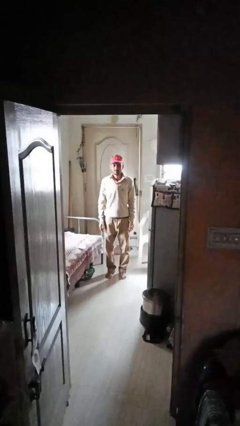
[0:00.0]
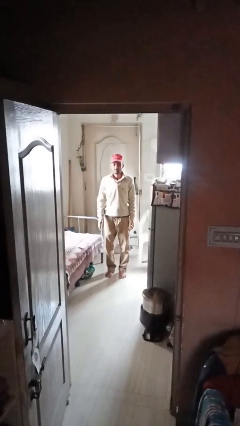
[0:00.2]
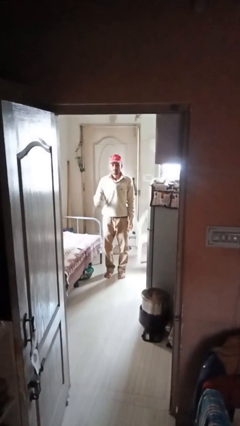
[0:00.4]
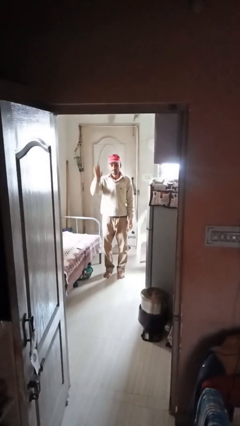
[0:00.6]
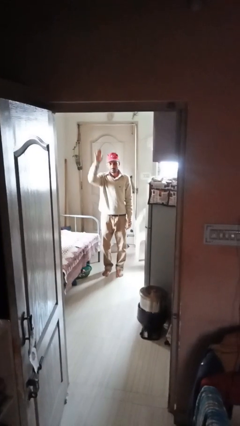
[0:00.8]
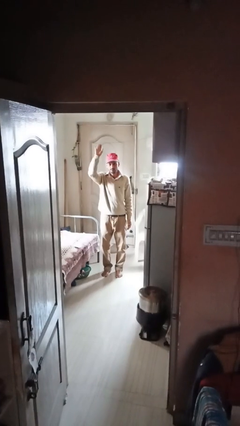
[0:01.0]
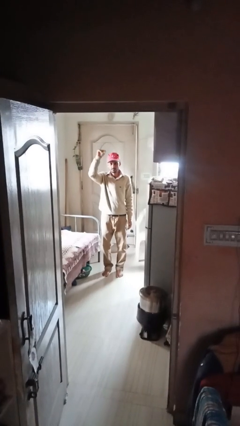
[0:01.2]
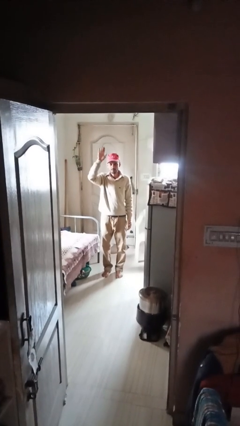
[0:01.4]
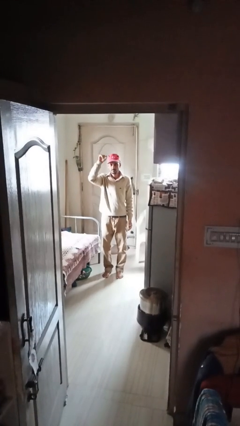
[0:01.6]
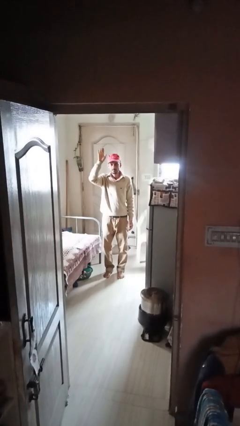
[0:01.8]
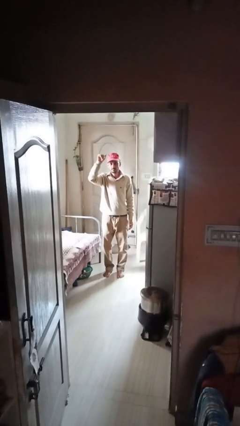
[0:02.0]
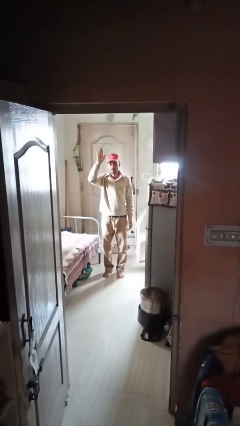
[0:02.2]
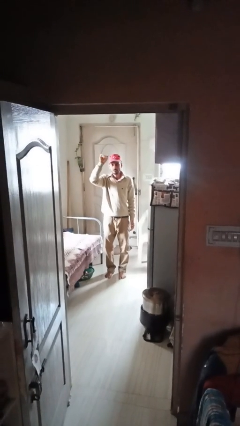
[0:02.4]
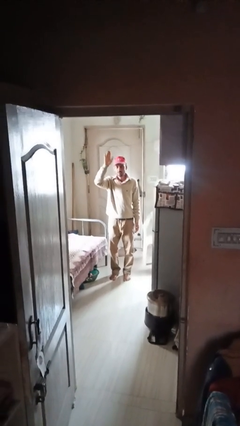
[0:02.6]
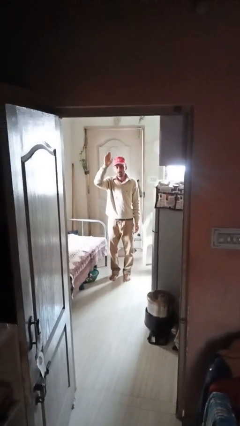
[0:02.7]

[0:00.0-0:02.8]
person gestures come here

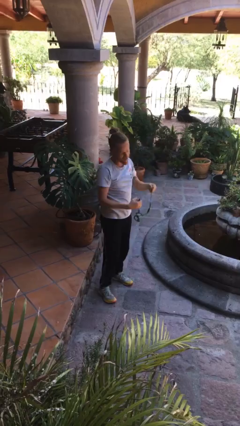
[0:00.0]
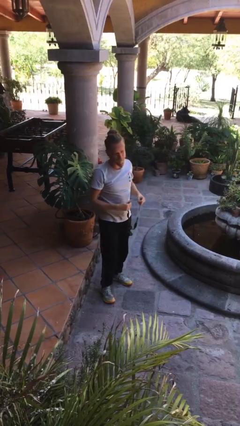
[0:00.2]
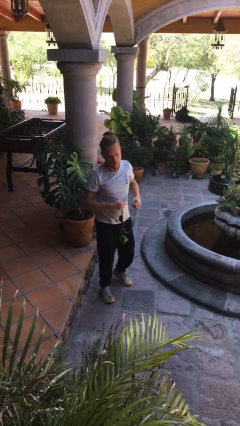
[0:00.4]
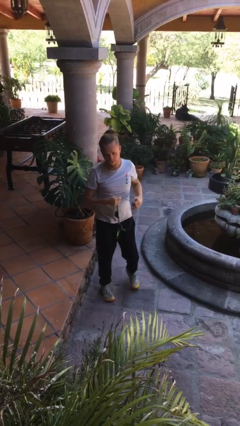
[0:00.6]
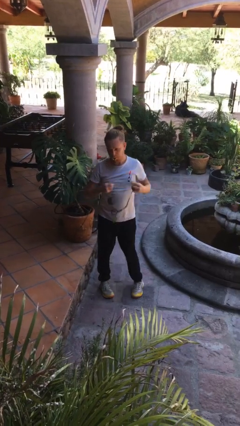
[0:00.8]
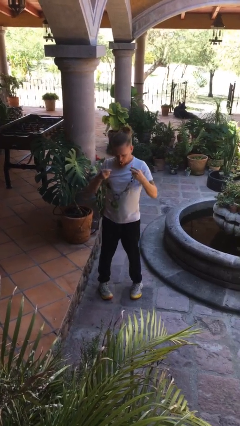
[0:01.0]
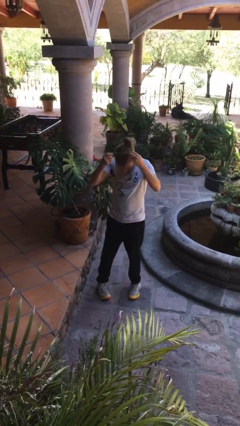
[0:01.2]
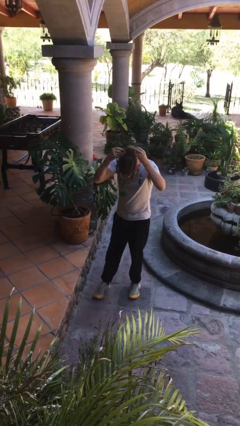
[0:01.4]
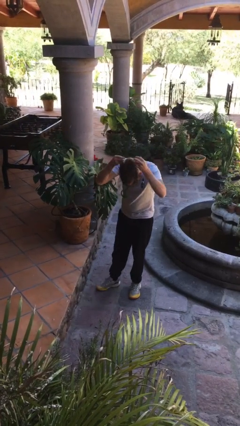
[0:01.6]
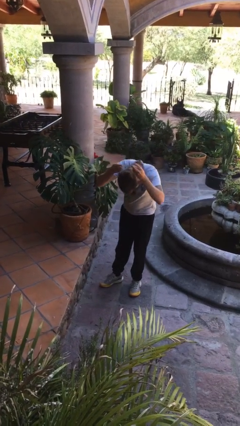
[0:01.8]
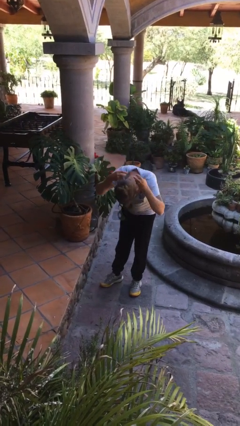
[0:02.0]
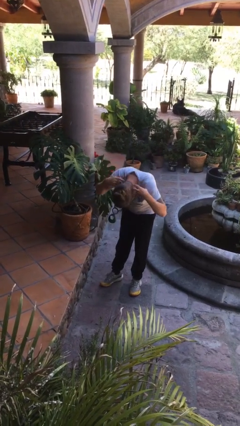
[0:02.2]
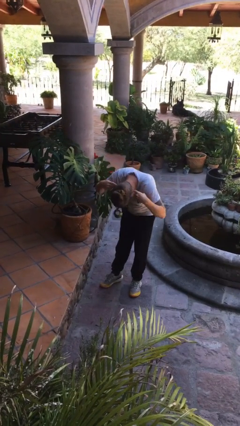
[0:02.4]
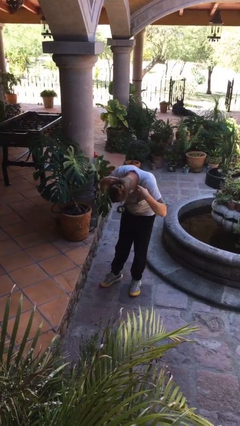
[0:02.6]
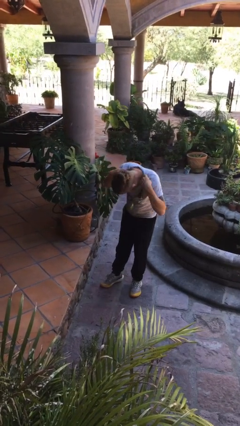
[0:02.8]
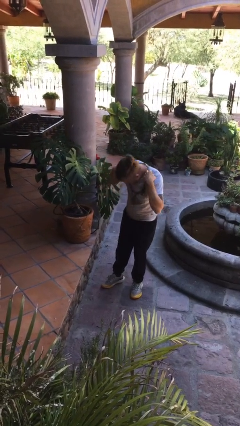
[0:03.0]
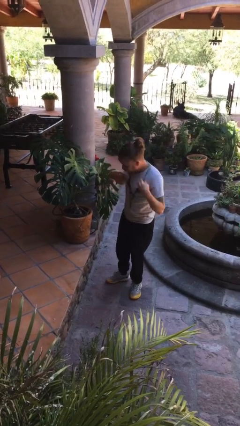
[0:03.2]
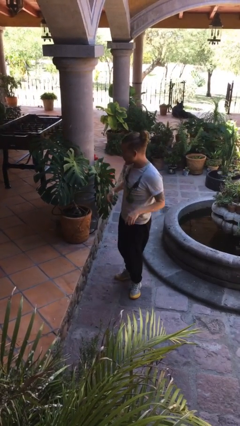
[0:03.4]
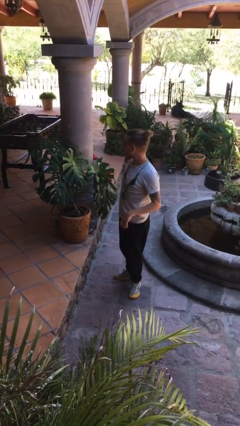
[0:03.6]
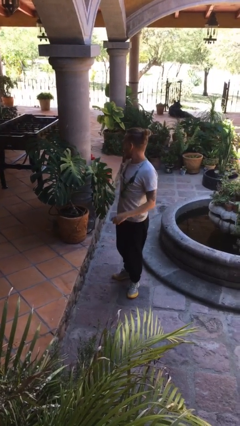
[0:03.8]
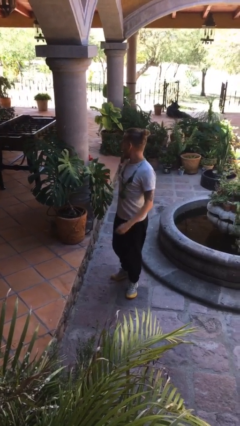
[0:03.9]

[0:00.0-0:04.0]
person puts on necklace

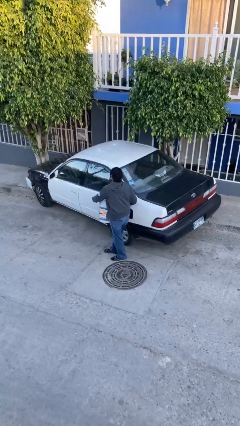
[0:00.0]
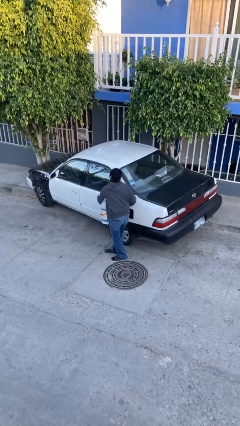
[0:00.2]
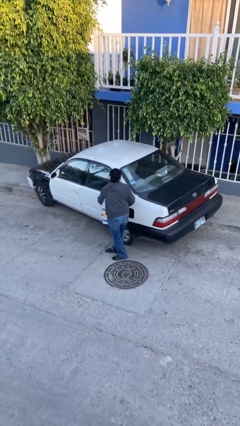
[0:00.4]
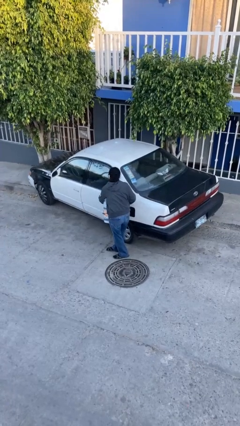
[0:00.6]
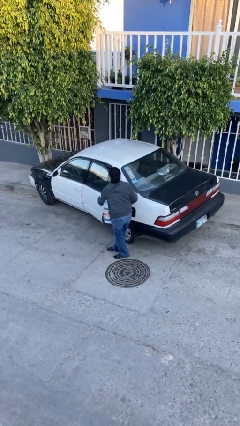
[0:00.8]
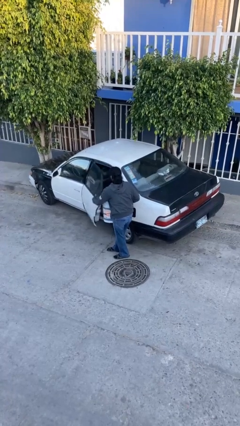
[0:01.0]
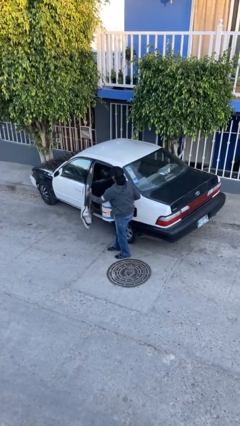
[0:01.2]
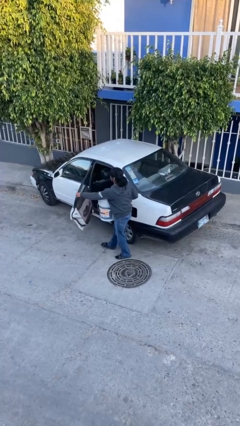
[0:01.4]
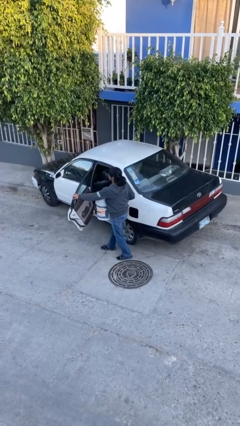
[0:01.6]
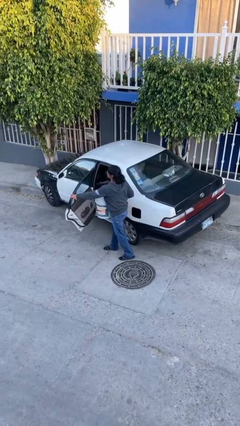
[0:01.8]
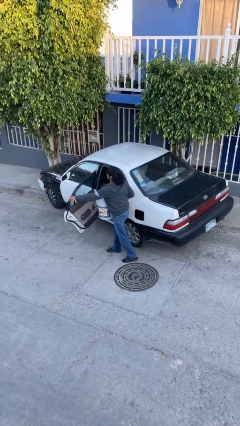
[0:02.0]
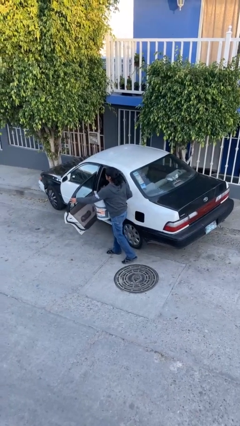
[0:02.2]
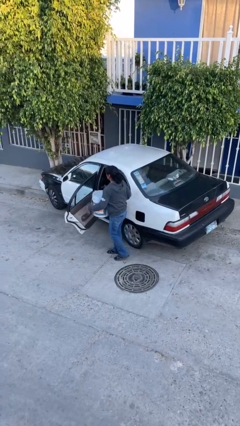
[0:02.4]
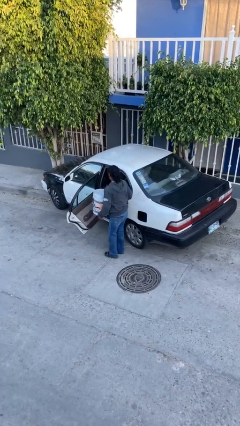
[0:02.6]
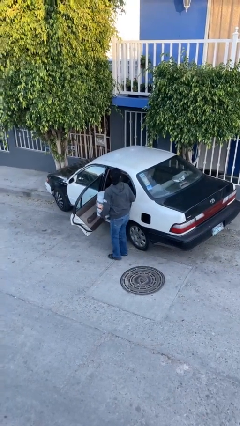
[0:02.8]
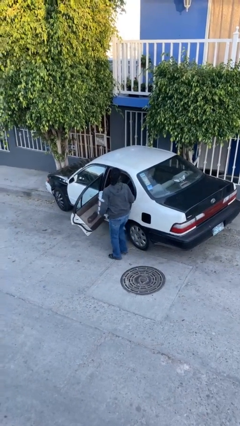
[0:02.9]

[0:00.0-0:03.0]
person opens car door

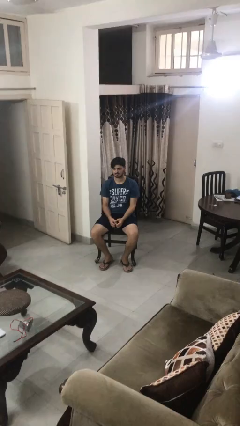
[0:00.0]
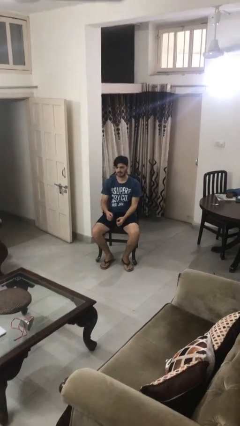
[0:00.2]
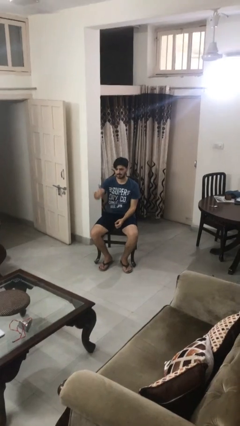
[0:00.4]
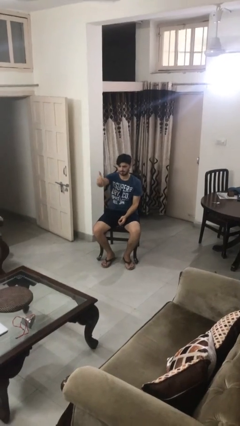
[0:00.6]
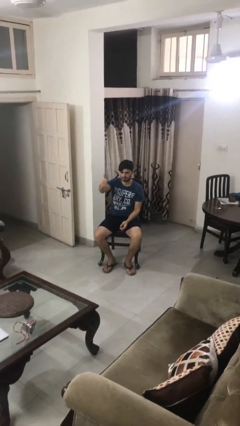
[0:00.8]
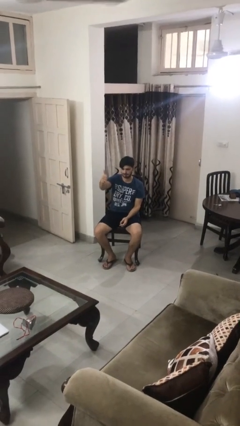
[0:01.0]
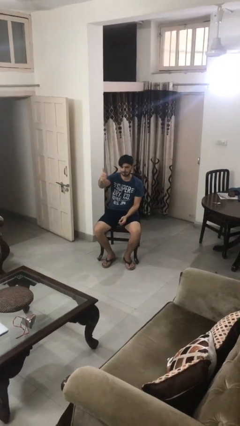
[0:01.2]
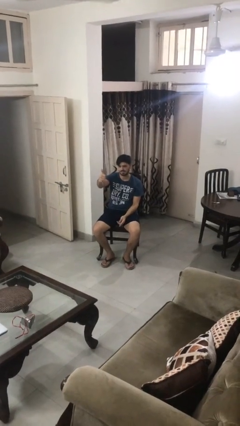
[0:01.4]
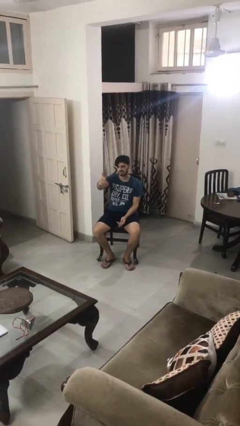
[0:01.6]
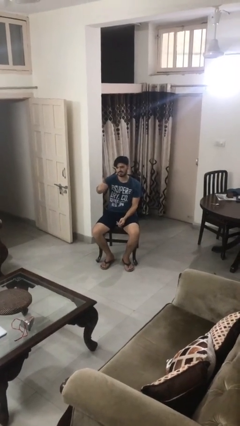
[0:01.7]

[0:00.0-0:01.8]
person gestures thumbs up

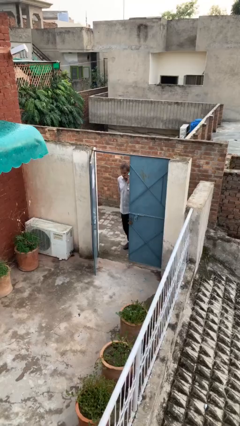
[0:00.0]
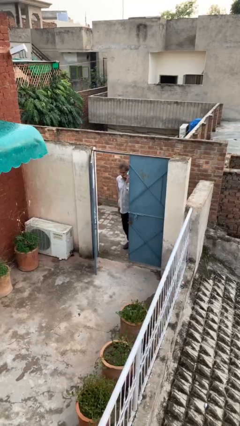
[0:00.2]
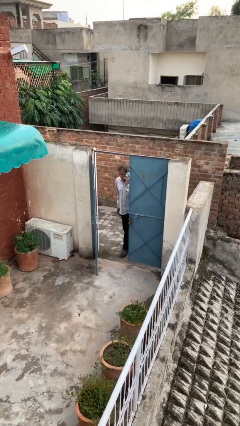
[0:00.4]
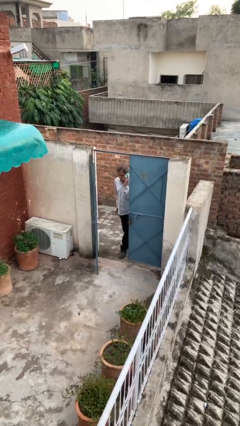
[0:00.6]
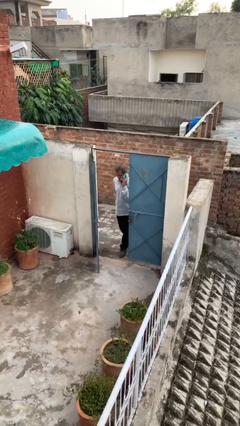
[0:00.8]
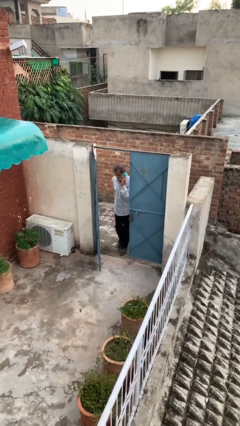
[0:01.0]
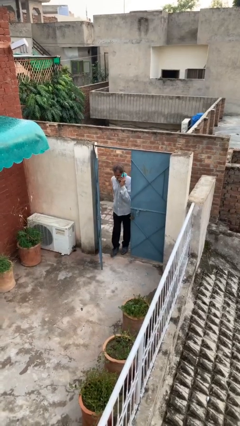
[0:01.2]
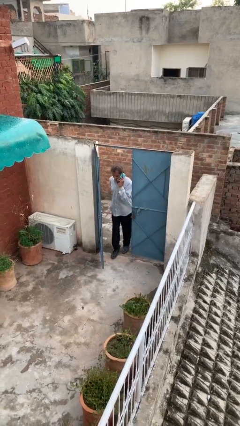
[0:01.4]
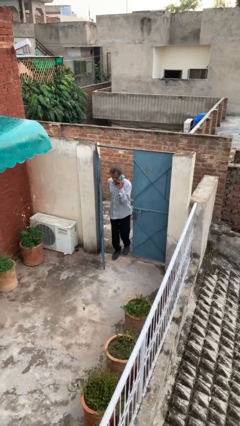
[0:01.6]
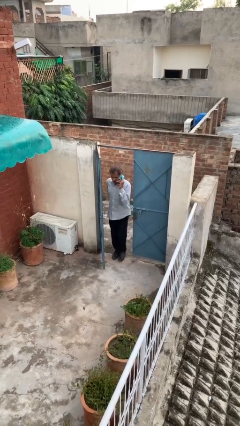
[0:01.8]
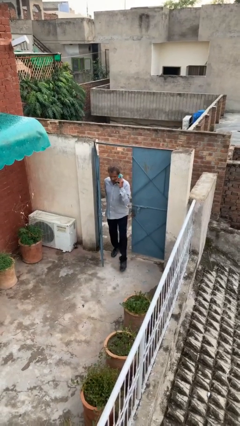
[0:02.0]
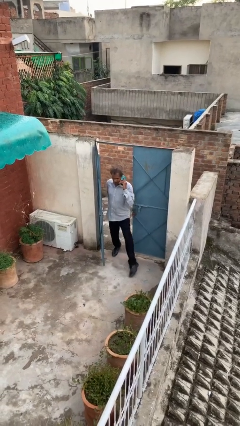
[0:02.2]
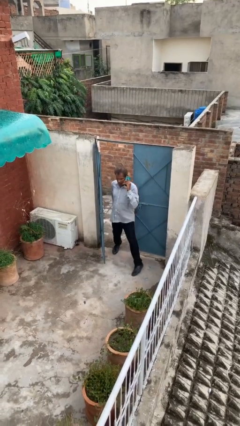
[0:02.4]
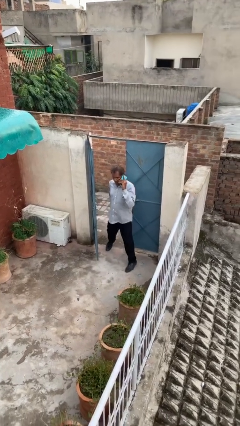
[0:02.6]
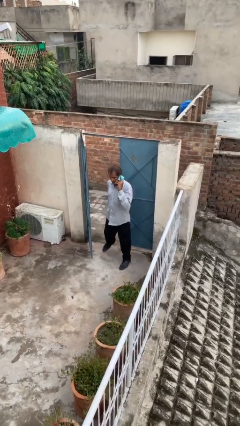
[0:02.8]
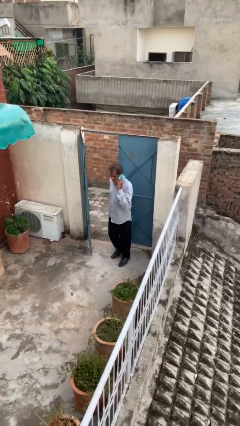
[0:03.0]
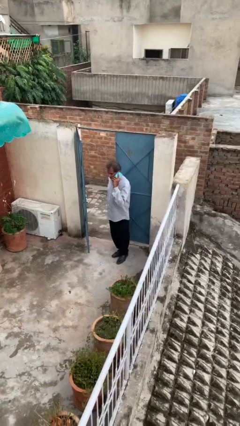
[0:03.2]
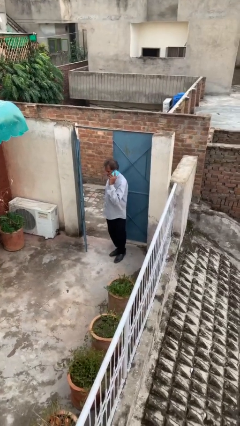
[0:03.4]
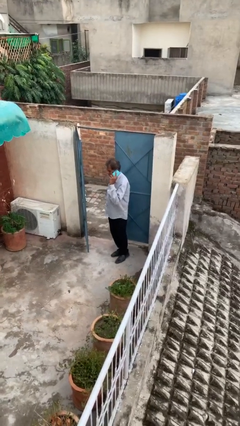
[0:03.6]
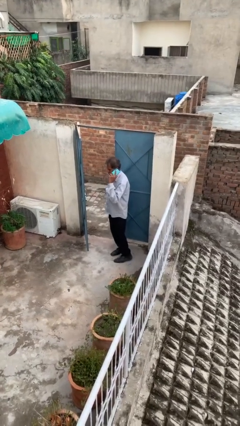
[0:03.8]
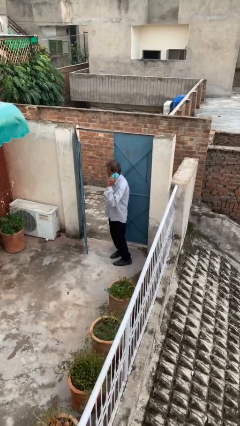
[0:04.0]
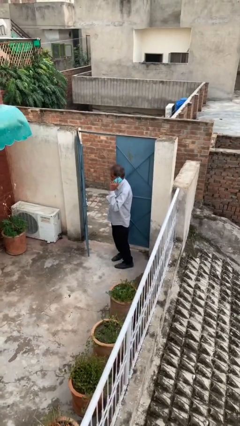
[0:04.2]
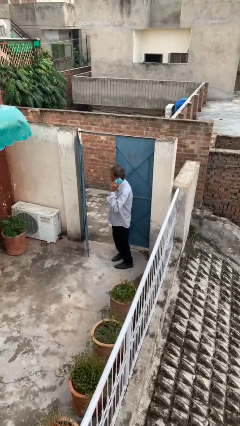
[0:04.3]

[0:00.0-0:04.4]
person enters scene through structure

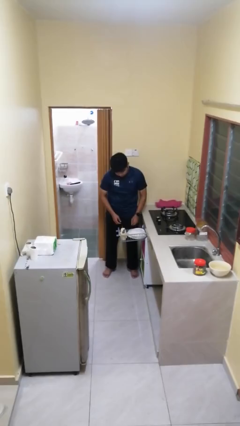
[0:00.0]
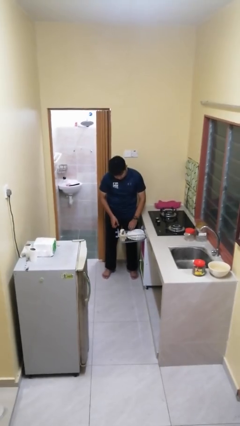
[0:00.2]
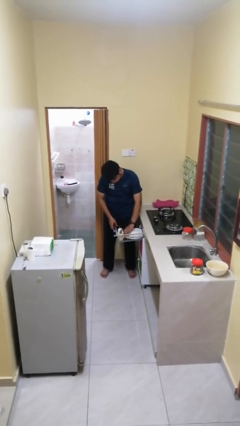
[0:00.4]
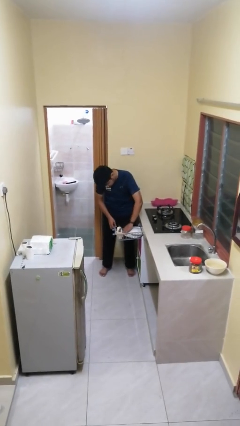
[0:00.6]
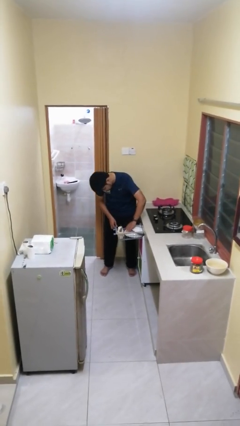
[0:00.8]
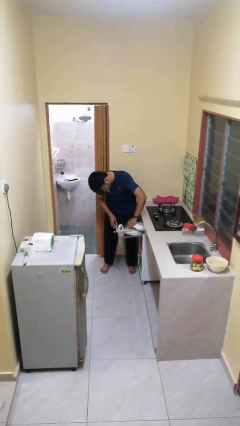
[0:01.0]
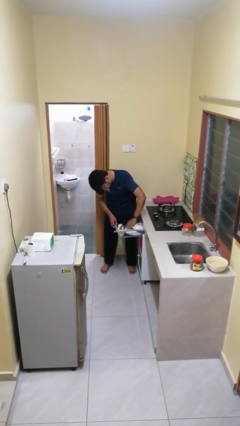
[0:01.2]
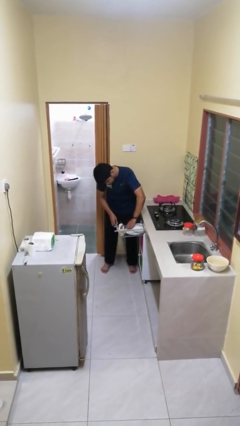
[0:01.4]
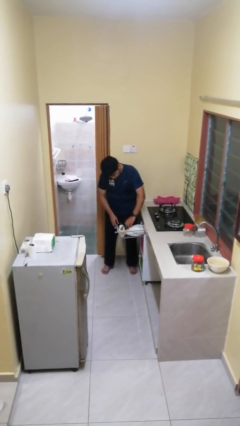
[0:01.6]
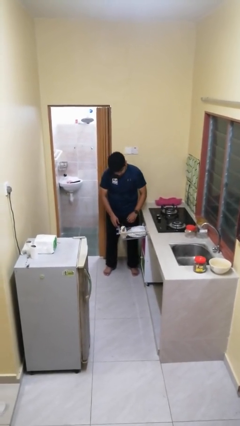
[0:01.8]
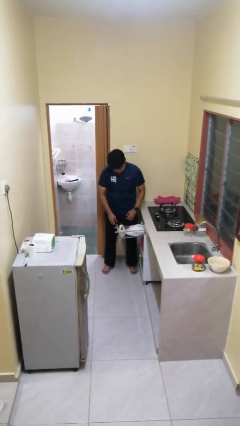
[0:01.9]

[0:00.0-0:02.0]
person searches in kitchen drawer
